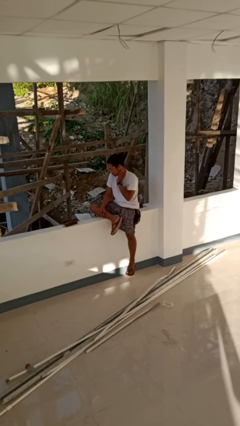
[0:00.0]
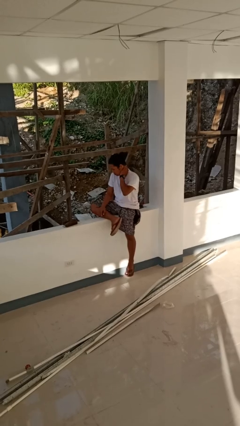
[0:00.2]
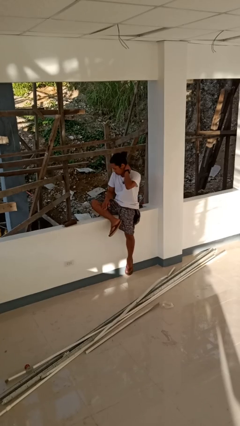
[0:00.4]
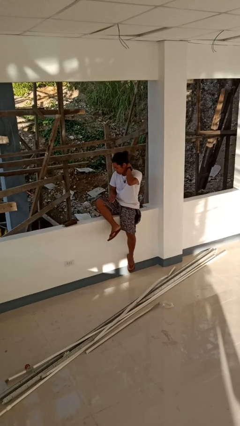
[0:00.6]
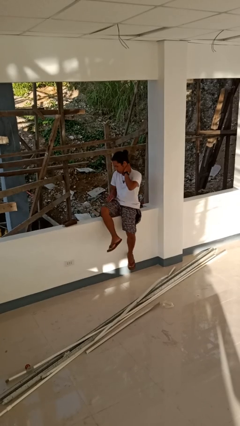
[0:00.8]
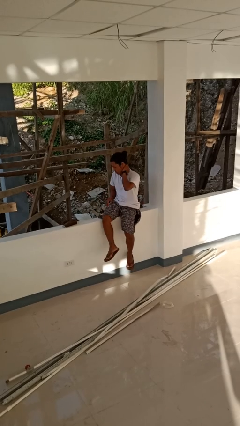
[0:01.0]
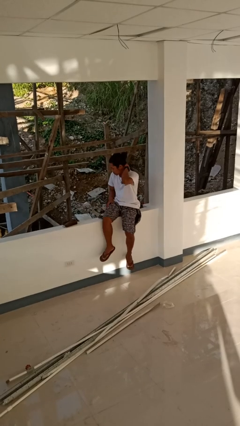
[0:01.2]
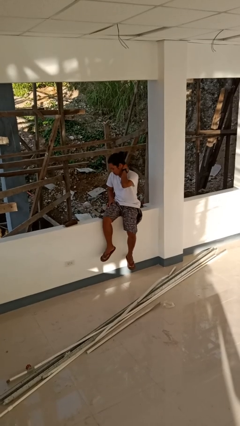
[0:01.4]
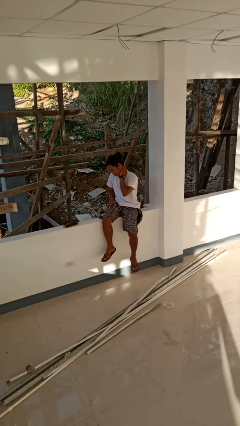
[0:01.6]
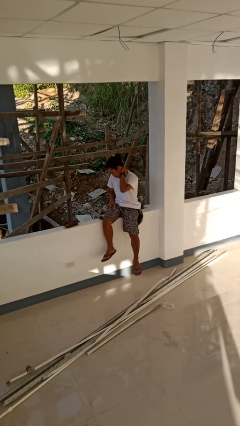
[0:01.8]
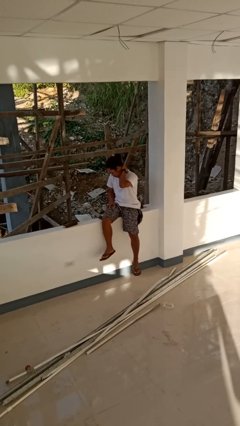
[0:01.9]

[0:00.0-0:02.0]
person rubs neck

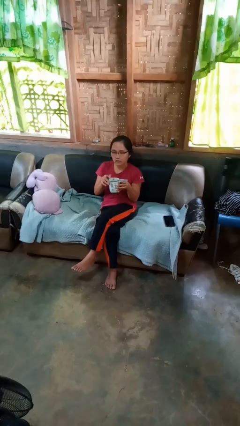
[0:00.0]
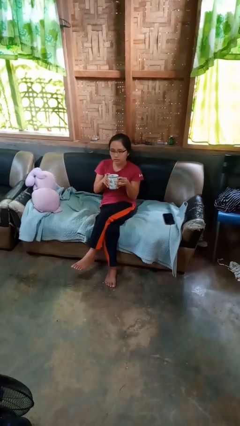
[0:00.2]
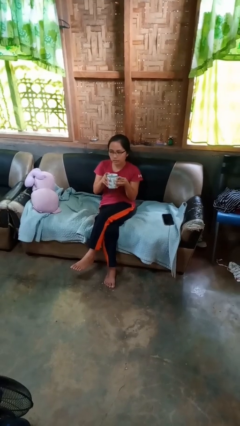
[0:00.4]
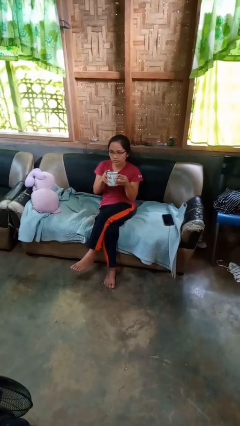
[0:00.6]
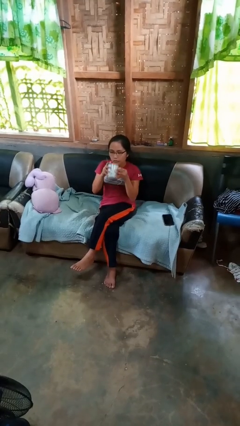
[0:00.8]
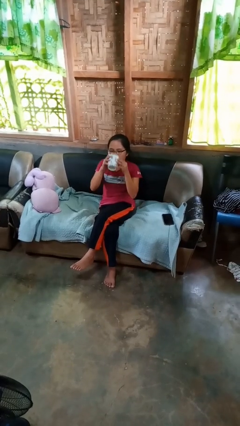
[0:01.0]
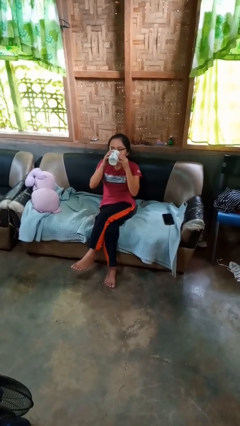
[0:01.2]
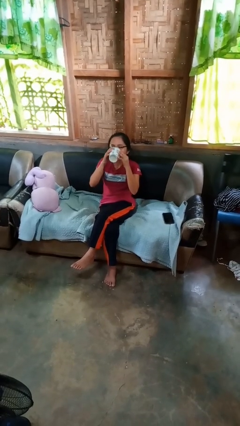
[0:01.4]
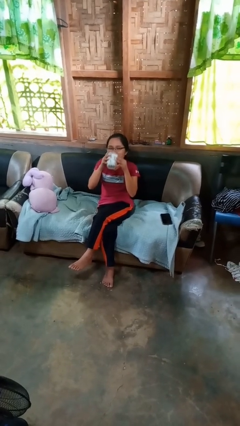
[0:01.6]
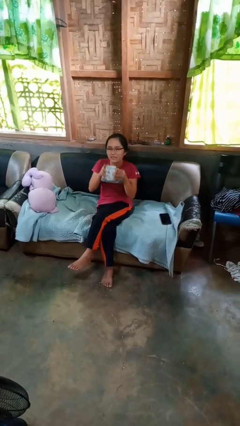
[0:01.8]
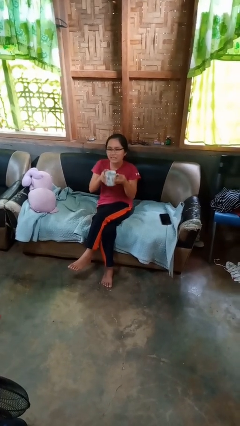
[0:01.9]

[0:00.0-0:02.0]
person drinks from mug

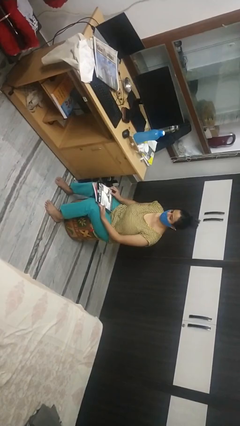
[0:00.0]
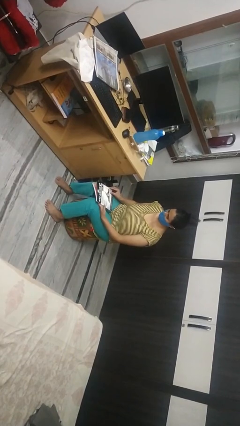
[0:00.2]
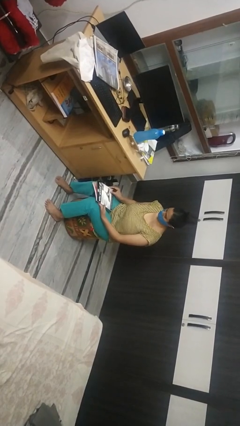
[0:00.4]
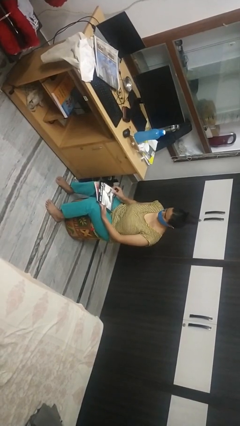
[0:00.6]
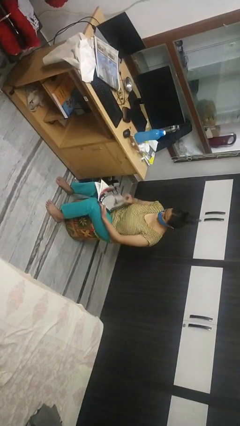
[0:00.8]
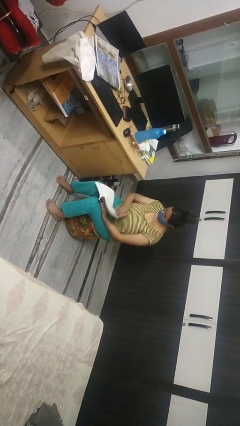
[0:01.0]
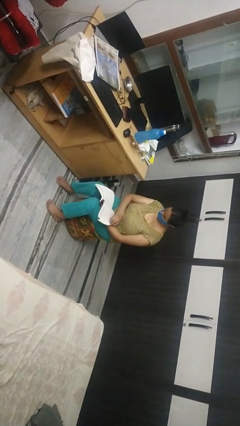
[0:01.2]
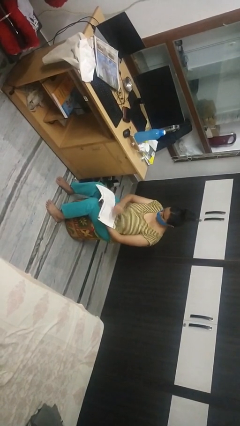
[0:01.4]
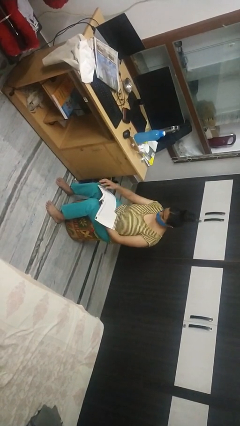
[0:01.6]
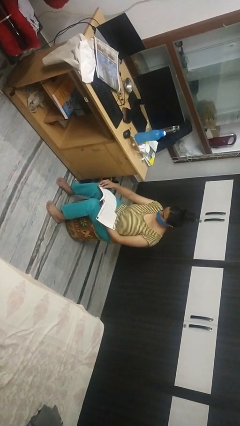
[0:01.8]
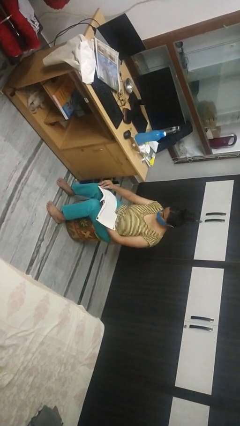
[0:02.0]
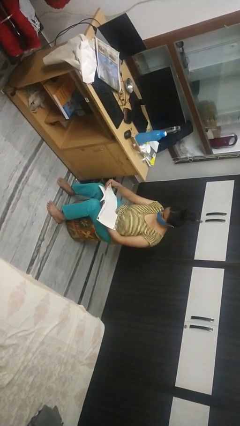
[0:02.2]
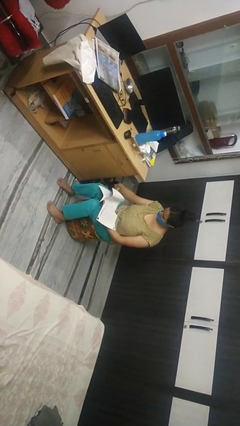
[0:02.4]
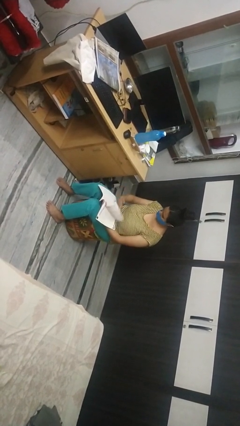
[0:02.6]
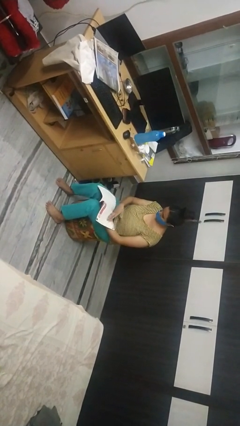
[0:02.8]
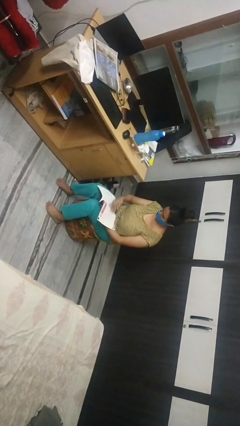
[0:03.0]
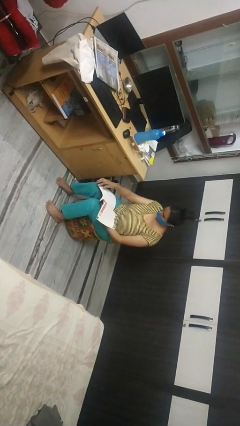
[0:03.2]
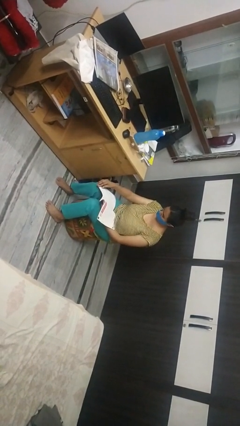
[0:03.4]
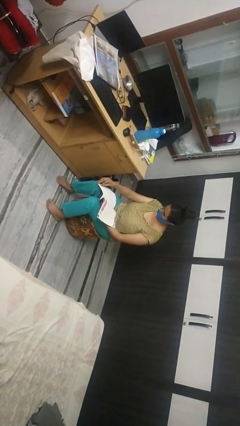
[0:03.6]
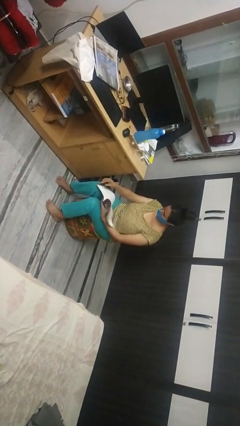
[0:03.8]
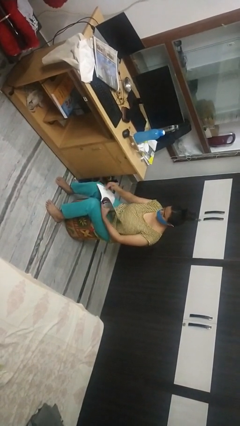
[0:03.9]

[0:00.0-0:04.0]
person reads magazine

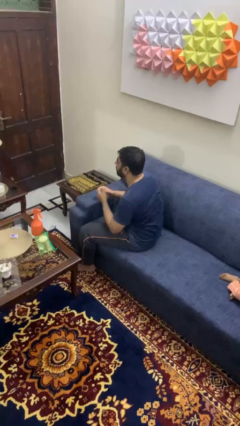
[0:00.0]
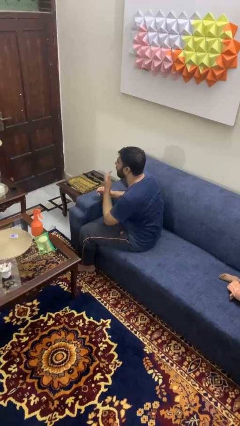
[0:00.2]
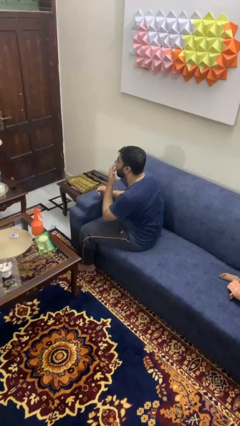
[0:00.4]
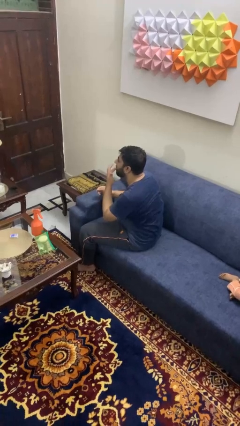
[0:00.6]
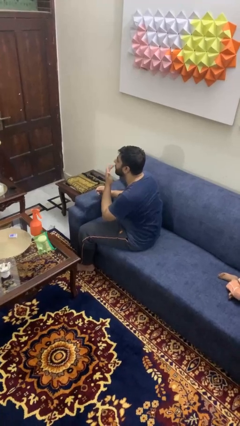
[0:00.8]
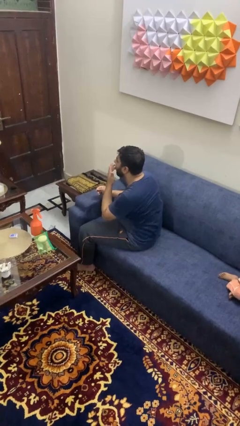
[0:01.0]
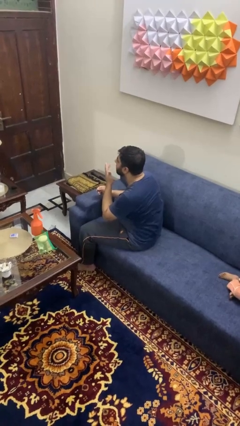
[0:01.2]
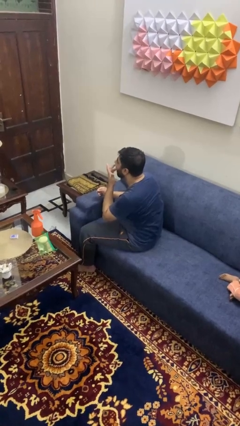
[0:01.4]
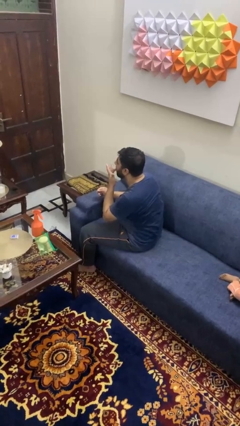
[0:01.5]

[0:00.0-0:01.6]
person licks fingers

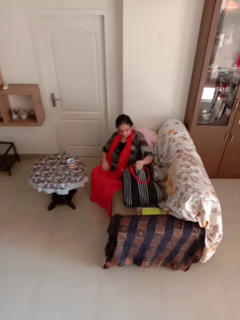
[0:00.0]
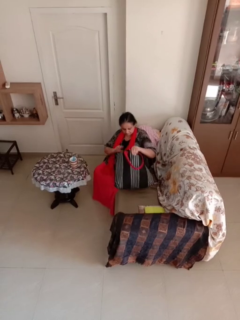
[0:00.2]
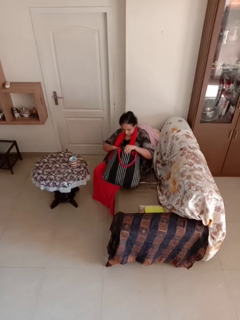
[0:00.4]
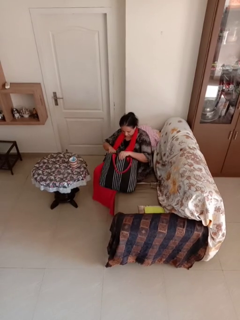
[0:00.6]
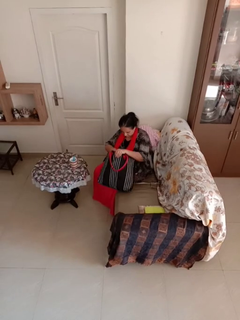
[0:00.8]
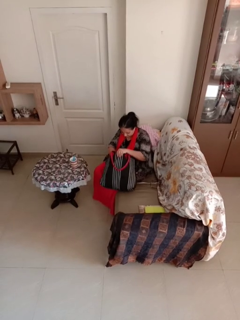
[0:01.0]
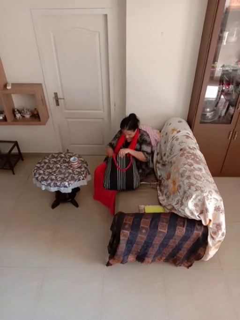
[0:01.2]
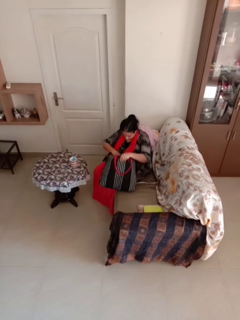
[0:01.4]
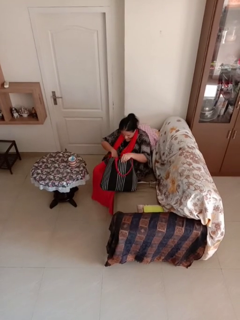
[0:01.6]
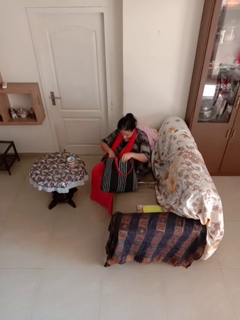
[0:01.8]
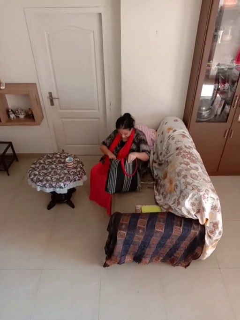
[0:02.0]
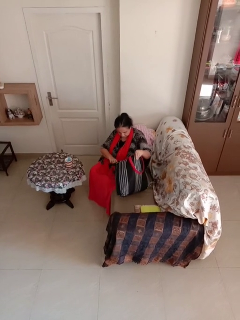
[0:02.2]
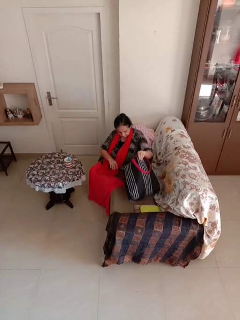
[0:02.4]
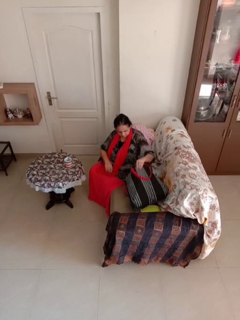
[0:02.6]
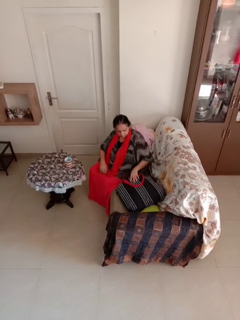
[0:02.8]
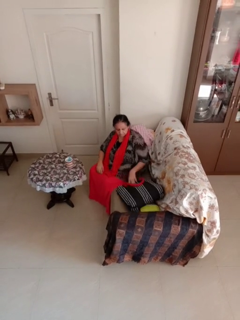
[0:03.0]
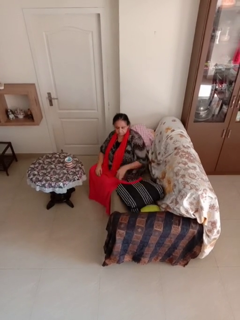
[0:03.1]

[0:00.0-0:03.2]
person searches in bag

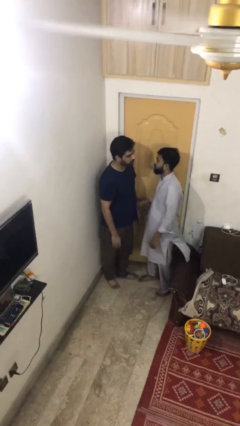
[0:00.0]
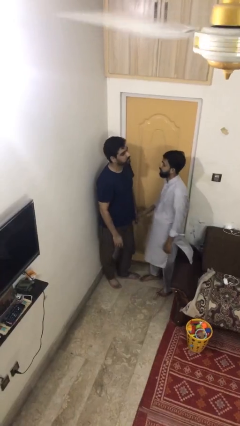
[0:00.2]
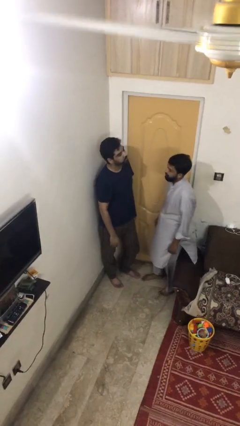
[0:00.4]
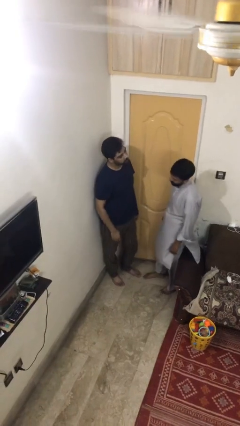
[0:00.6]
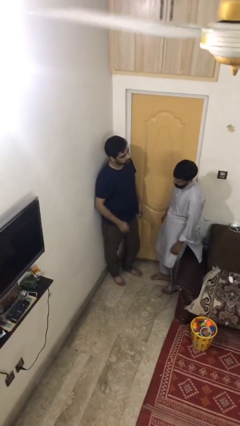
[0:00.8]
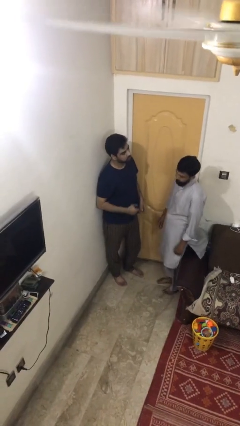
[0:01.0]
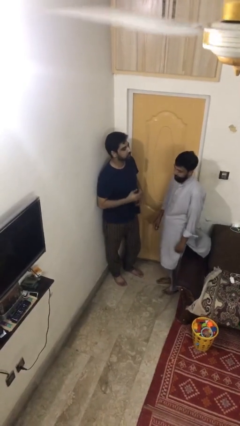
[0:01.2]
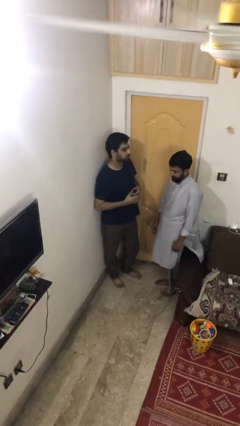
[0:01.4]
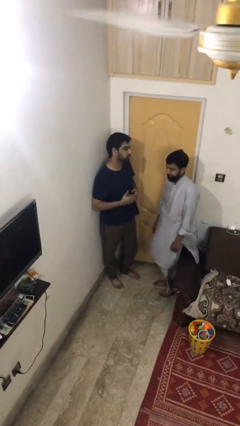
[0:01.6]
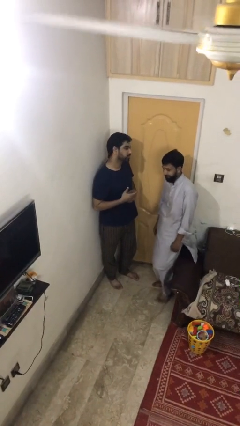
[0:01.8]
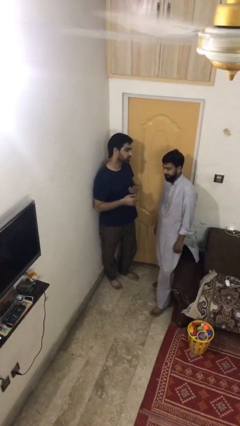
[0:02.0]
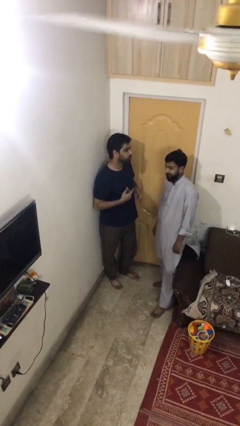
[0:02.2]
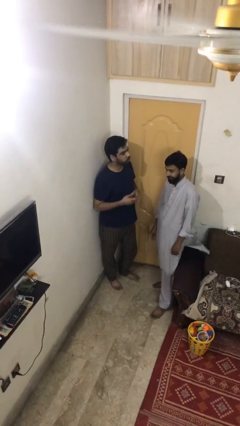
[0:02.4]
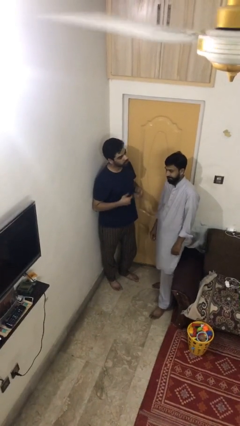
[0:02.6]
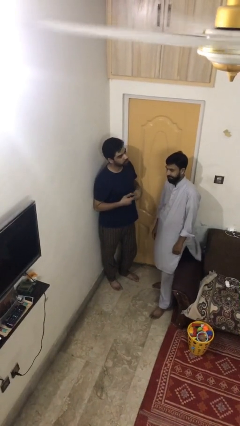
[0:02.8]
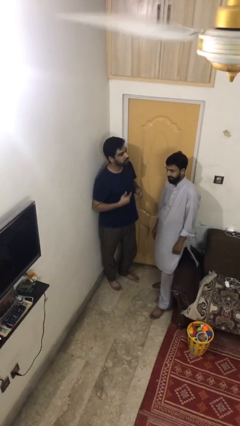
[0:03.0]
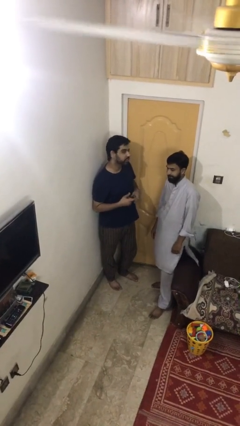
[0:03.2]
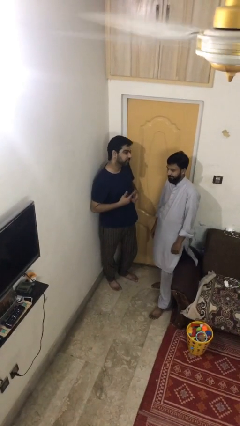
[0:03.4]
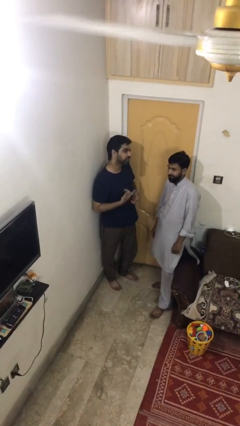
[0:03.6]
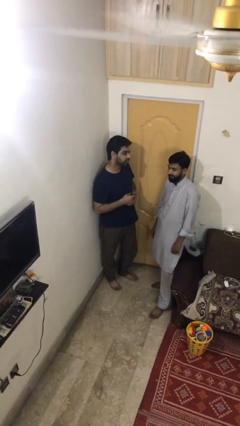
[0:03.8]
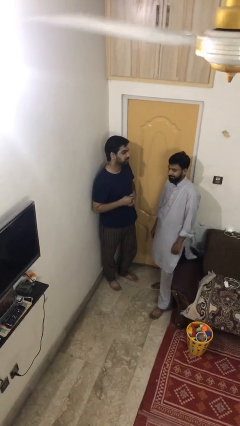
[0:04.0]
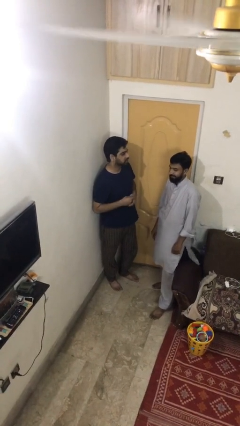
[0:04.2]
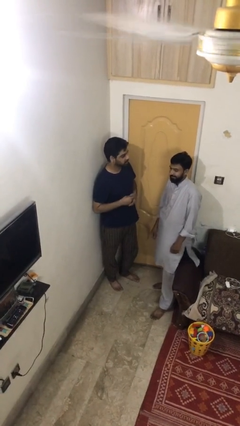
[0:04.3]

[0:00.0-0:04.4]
person talks to person

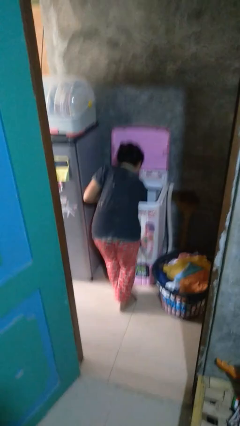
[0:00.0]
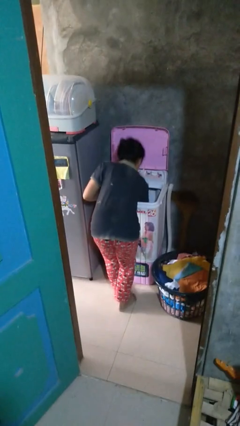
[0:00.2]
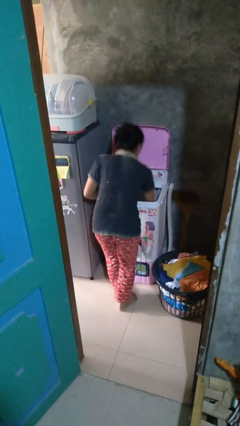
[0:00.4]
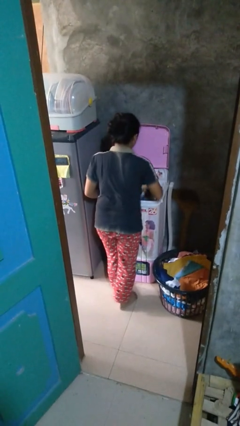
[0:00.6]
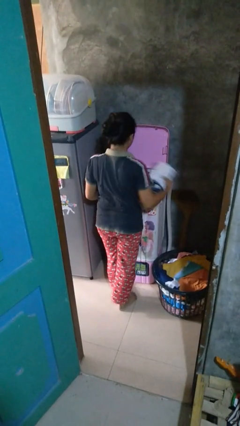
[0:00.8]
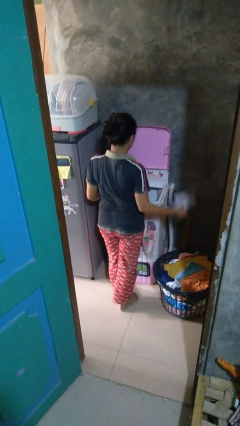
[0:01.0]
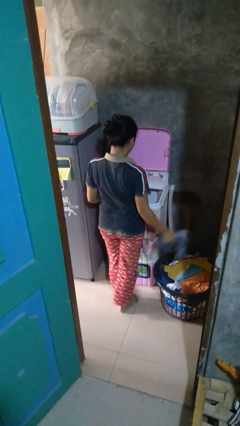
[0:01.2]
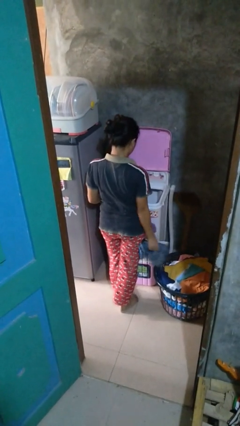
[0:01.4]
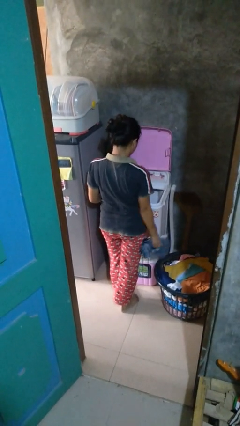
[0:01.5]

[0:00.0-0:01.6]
person unloads clotheswasher
